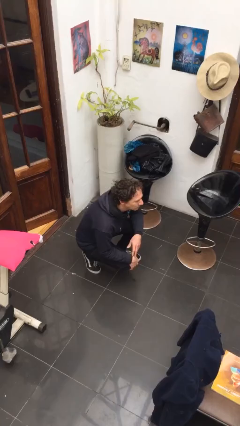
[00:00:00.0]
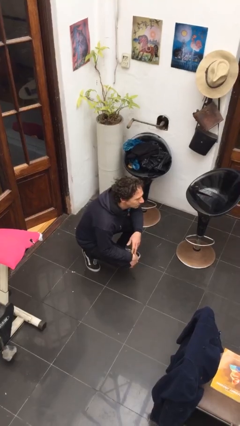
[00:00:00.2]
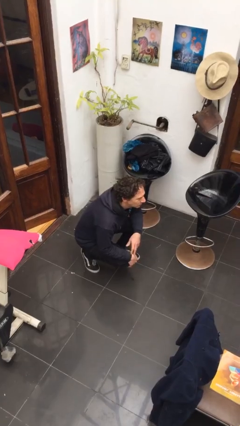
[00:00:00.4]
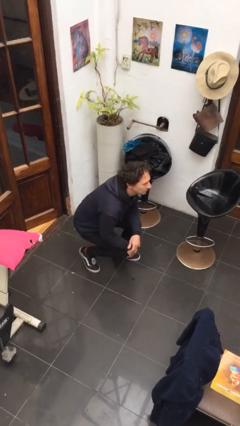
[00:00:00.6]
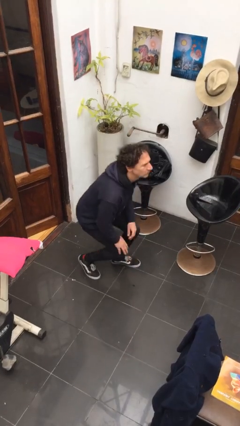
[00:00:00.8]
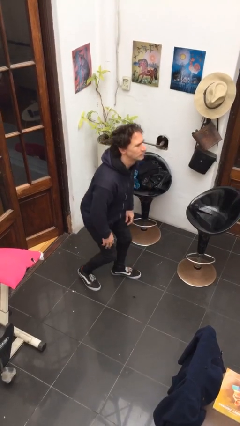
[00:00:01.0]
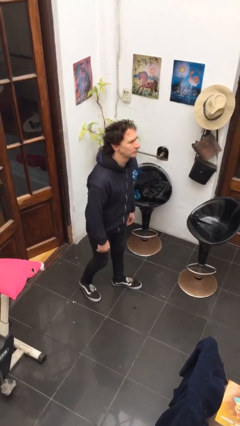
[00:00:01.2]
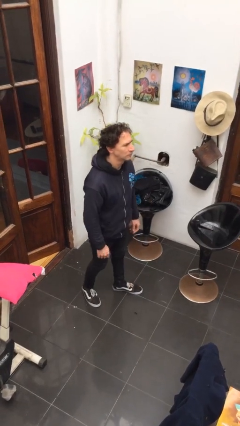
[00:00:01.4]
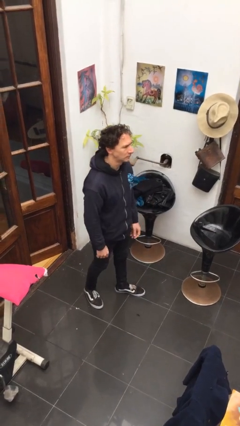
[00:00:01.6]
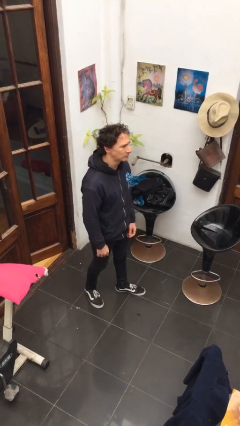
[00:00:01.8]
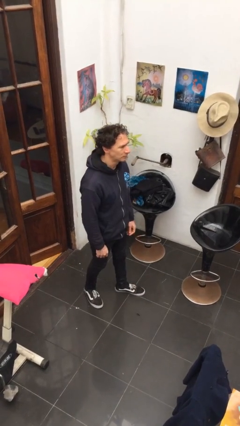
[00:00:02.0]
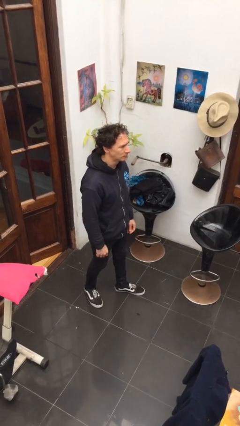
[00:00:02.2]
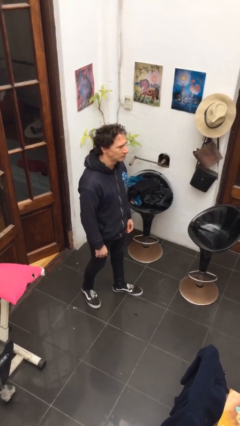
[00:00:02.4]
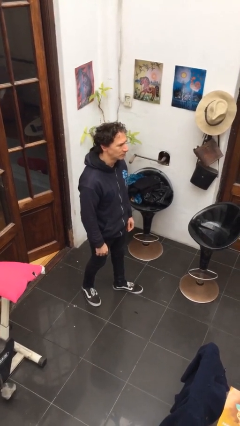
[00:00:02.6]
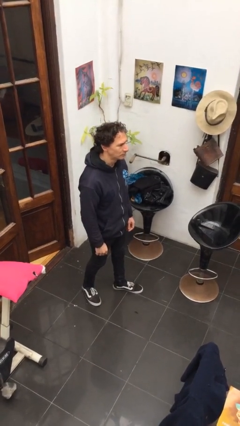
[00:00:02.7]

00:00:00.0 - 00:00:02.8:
person stands up

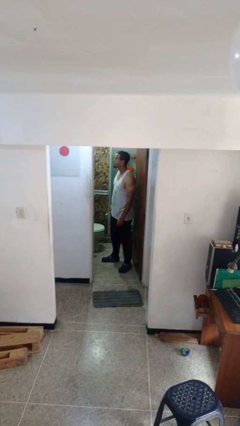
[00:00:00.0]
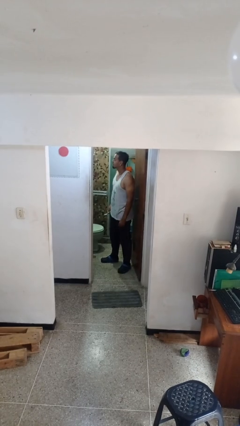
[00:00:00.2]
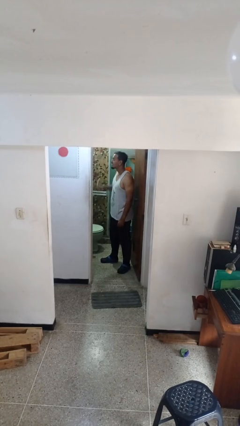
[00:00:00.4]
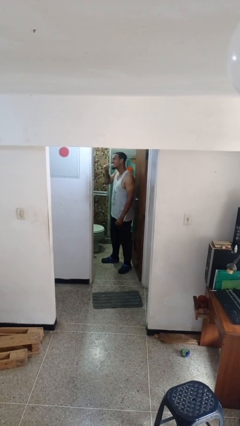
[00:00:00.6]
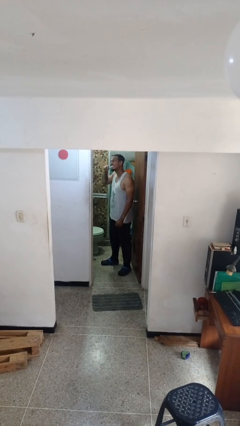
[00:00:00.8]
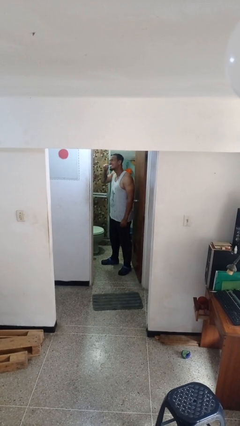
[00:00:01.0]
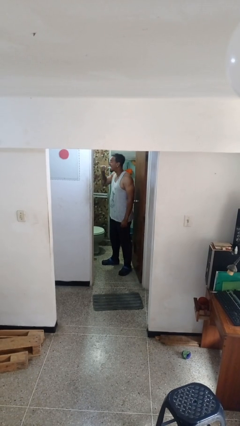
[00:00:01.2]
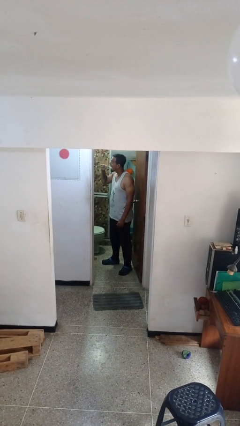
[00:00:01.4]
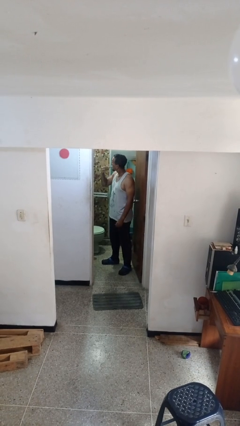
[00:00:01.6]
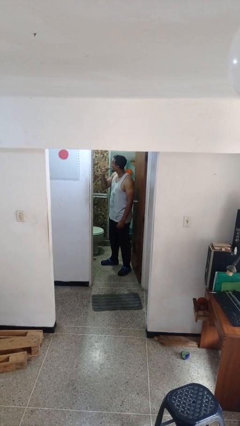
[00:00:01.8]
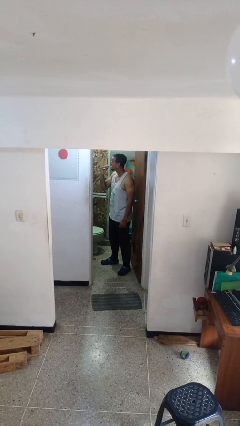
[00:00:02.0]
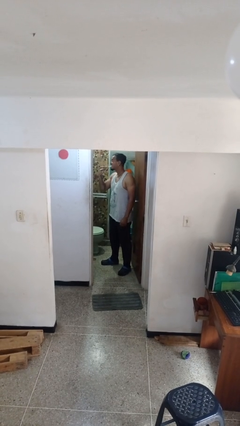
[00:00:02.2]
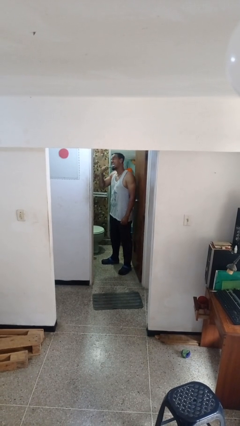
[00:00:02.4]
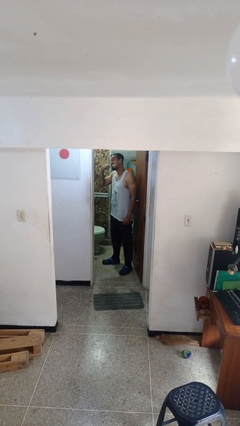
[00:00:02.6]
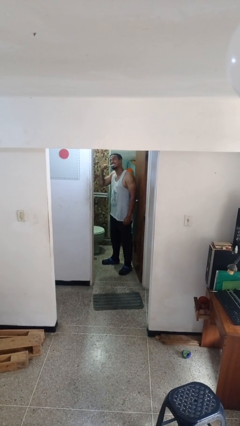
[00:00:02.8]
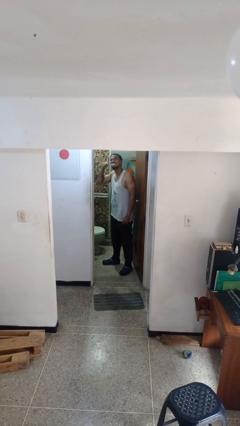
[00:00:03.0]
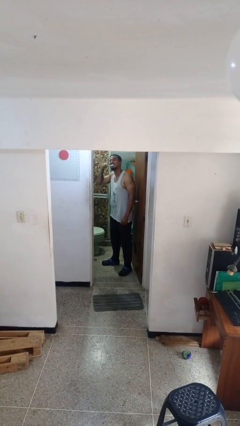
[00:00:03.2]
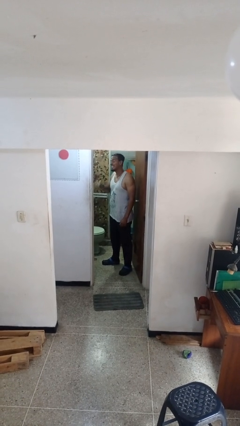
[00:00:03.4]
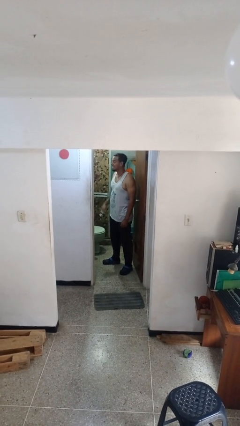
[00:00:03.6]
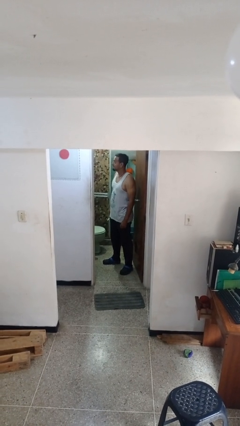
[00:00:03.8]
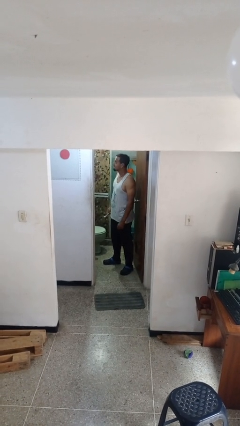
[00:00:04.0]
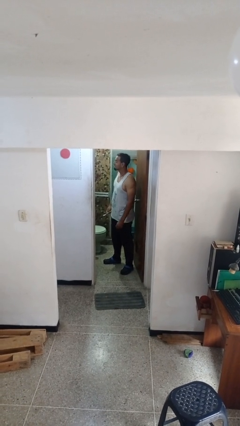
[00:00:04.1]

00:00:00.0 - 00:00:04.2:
person brushes teeth

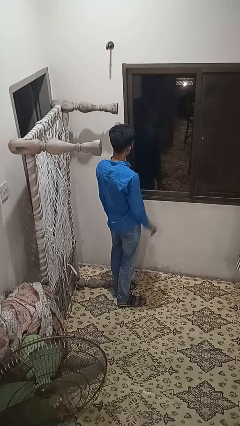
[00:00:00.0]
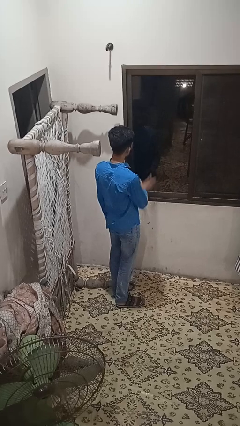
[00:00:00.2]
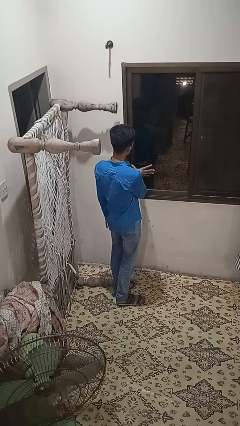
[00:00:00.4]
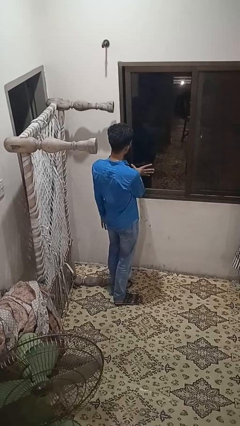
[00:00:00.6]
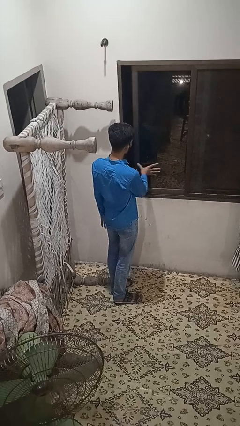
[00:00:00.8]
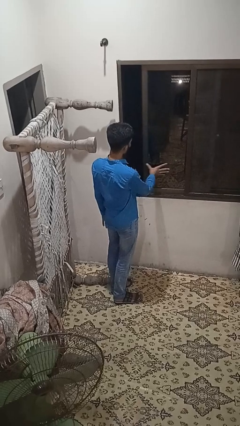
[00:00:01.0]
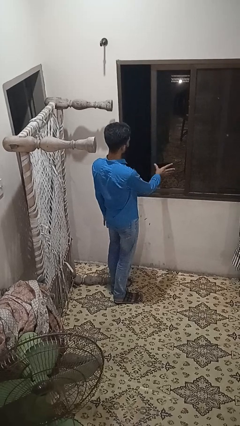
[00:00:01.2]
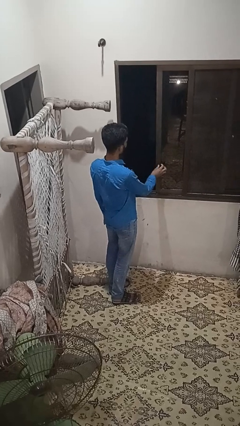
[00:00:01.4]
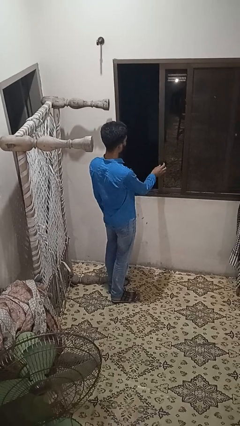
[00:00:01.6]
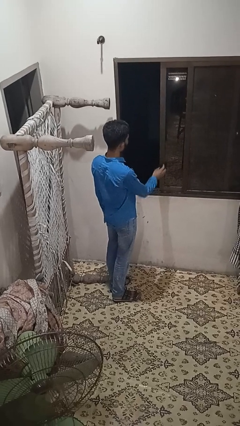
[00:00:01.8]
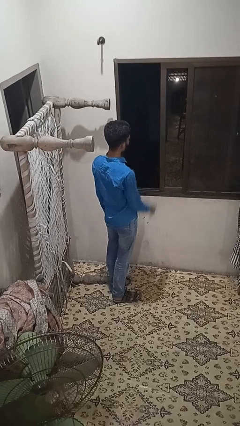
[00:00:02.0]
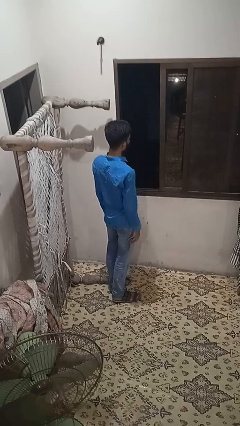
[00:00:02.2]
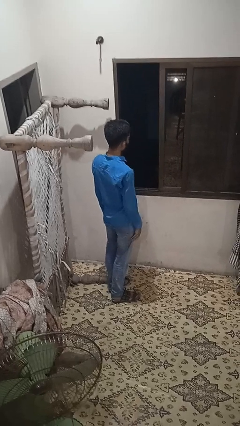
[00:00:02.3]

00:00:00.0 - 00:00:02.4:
person opens home window

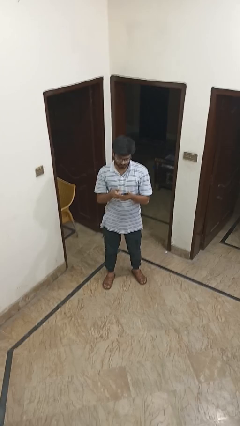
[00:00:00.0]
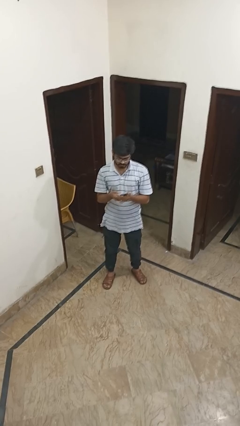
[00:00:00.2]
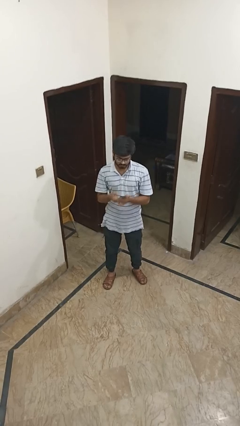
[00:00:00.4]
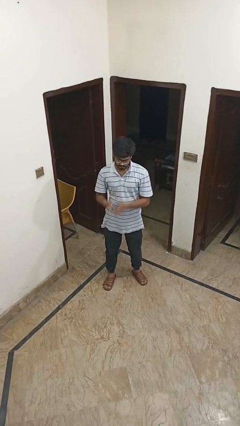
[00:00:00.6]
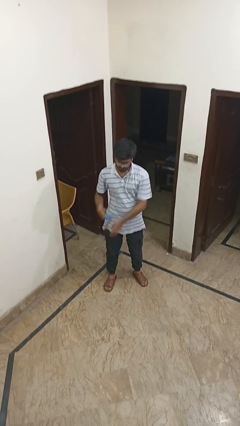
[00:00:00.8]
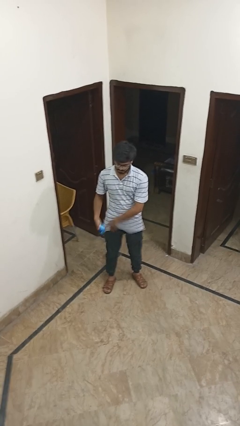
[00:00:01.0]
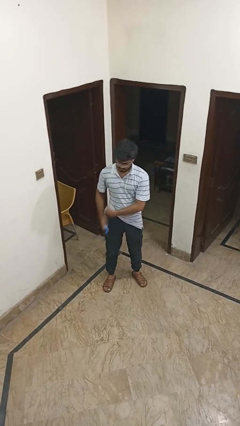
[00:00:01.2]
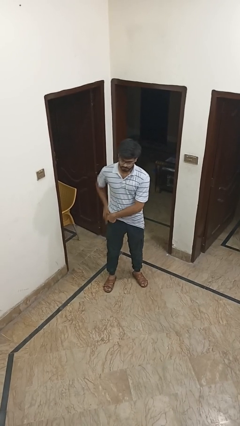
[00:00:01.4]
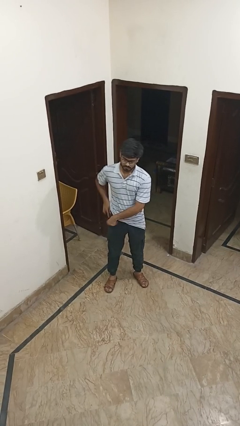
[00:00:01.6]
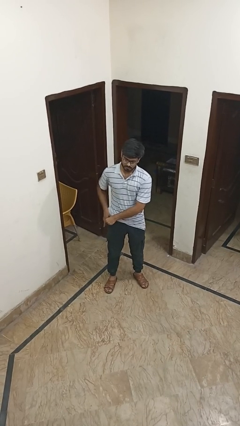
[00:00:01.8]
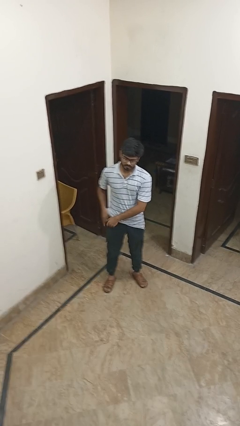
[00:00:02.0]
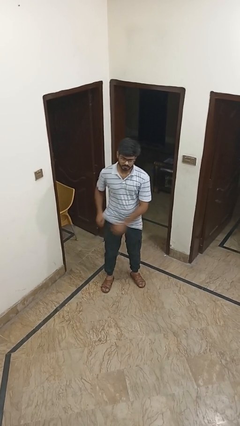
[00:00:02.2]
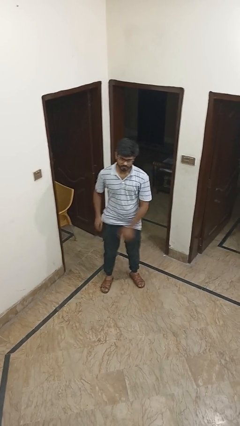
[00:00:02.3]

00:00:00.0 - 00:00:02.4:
person puts phone into pocket

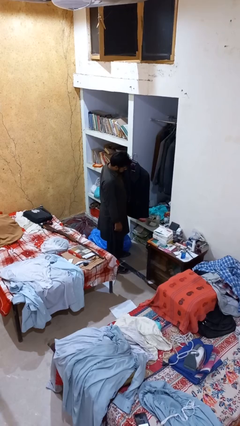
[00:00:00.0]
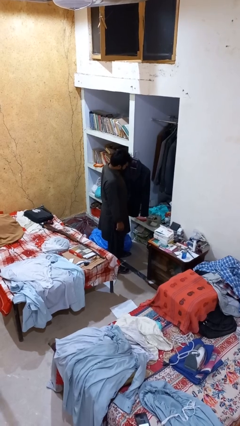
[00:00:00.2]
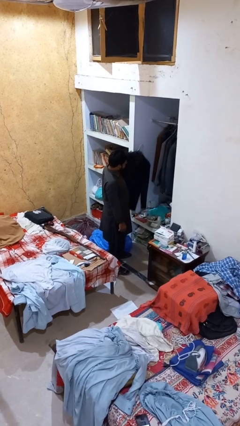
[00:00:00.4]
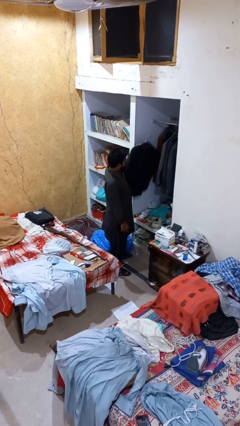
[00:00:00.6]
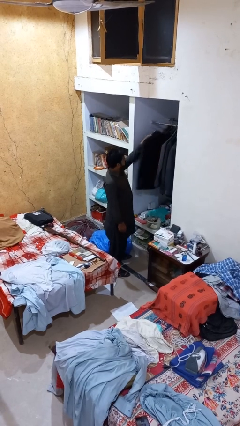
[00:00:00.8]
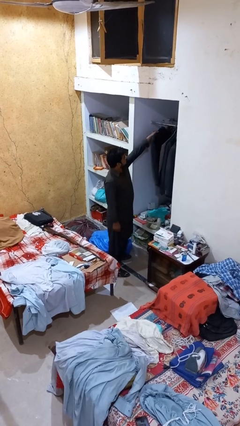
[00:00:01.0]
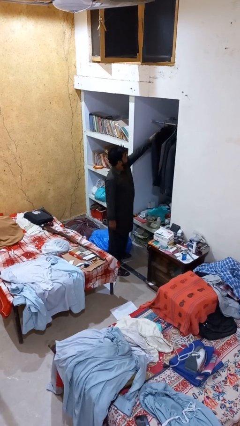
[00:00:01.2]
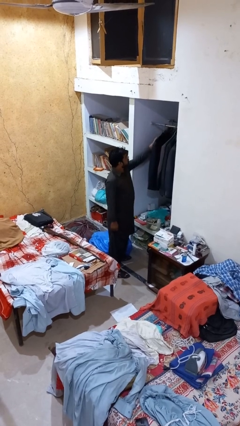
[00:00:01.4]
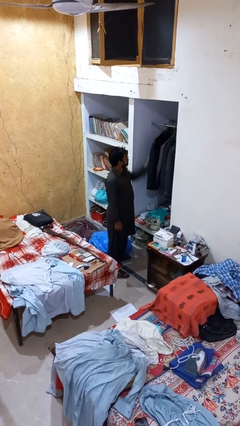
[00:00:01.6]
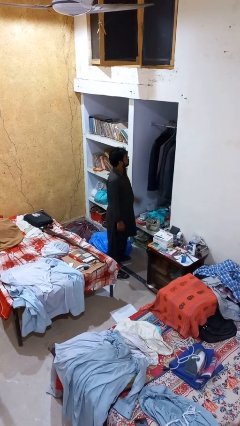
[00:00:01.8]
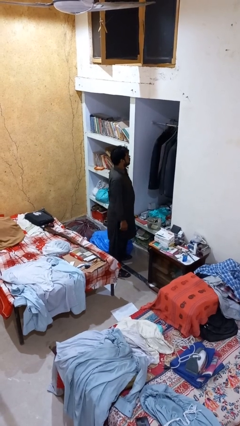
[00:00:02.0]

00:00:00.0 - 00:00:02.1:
person puts clothes into closet

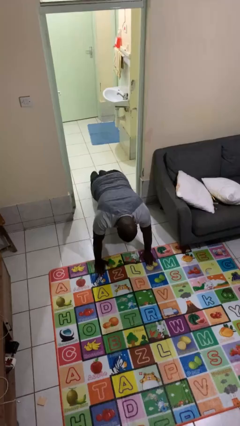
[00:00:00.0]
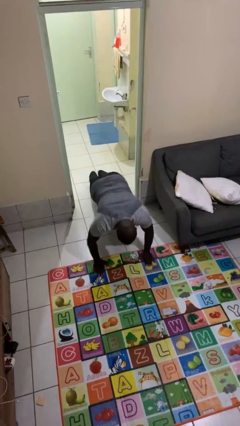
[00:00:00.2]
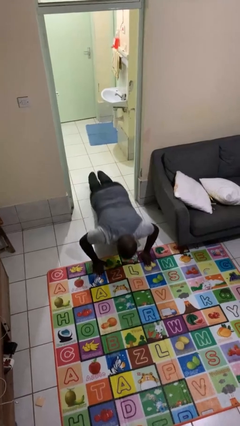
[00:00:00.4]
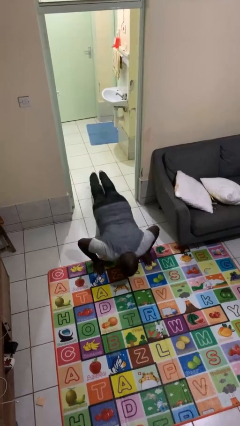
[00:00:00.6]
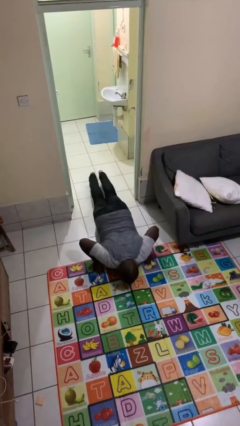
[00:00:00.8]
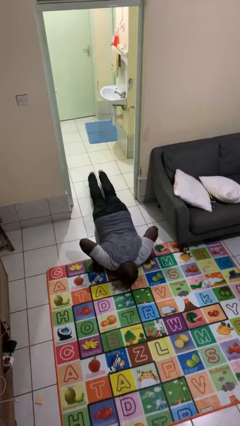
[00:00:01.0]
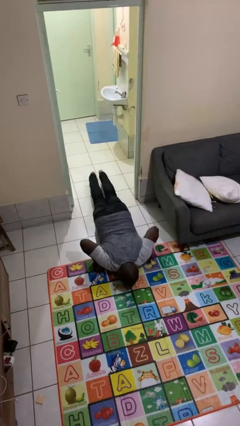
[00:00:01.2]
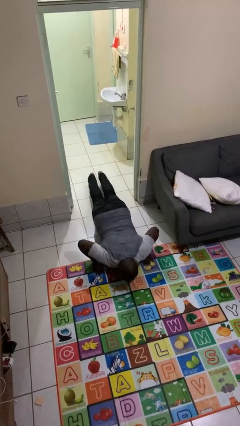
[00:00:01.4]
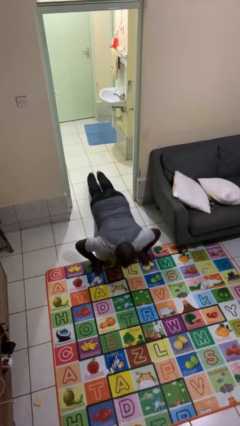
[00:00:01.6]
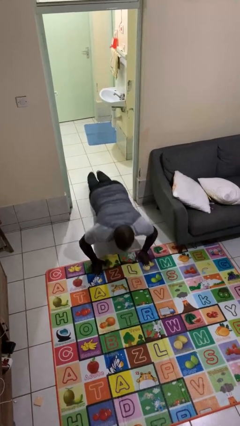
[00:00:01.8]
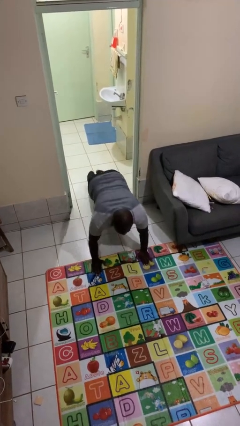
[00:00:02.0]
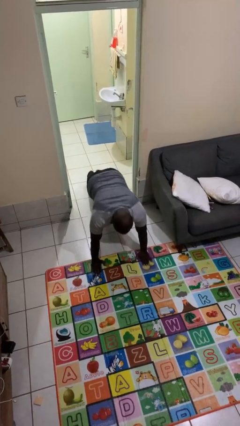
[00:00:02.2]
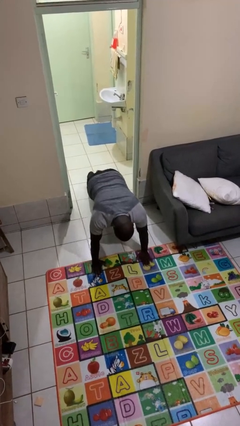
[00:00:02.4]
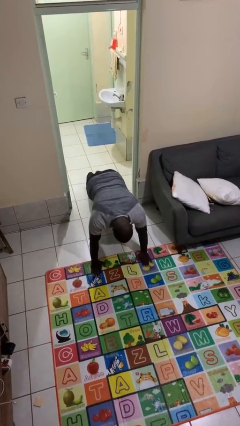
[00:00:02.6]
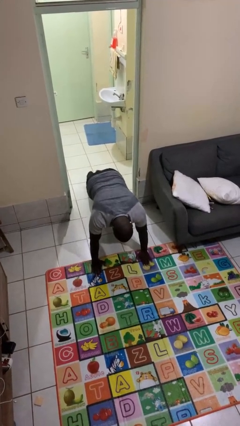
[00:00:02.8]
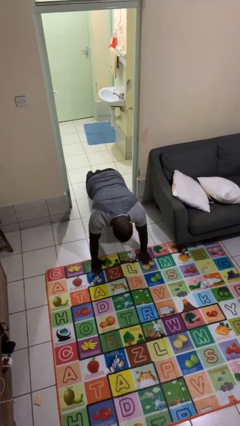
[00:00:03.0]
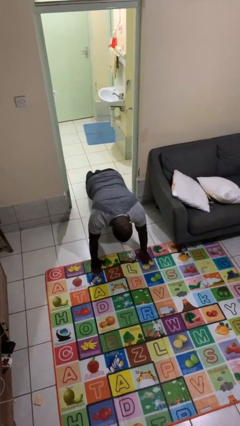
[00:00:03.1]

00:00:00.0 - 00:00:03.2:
person exercises with pushup
